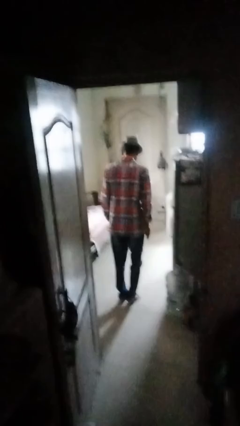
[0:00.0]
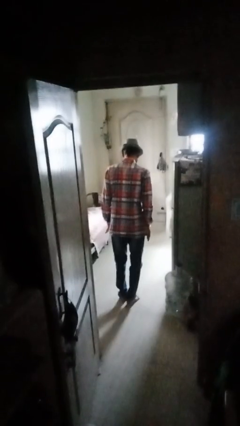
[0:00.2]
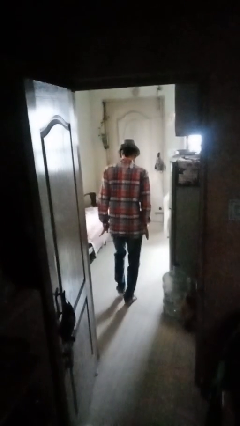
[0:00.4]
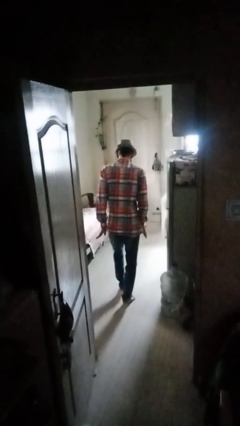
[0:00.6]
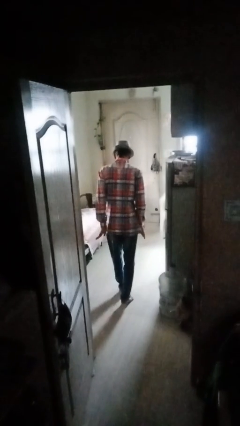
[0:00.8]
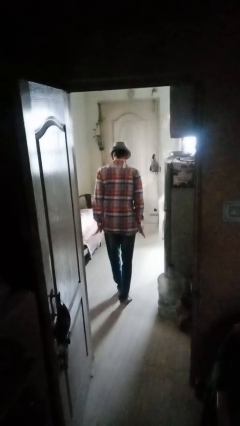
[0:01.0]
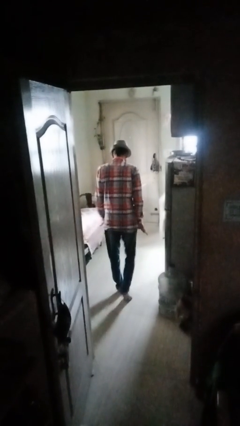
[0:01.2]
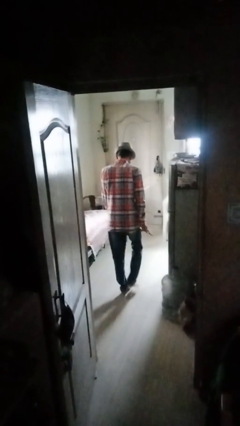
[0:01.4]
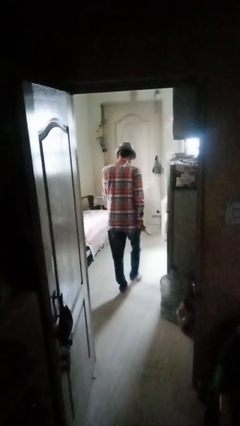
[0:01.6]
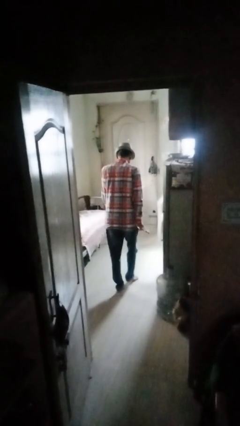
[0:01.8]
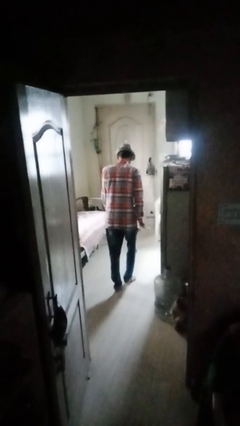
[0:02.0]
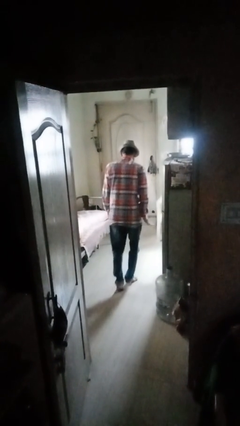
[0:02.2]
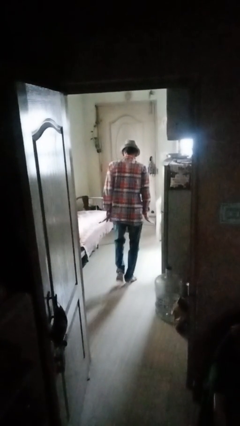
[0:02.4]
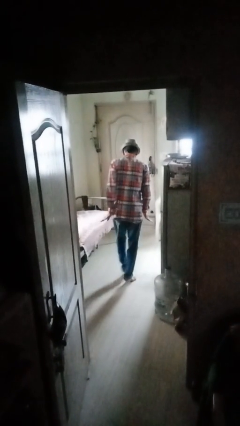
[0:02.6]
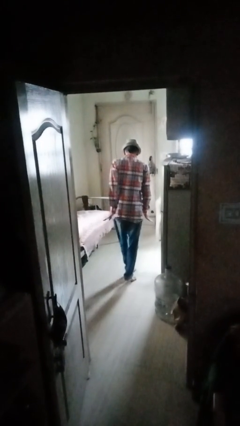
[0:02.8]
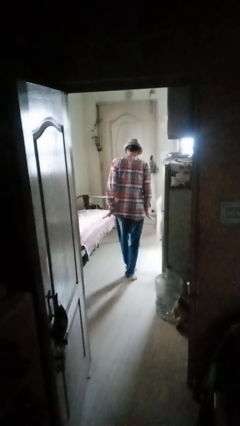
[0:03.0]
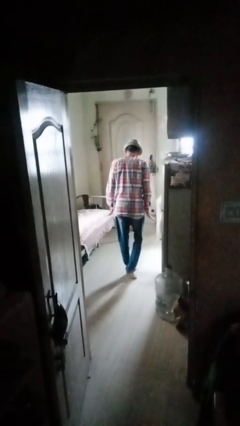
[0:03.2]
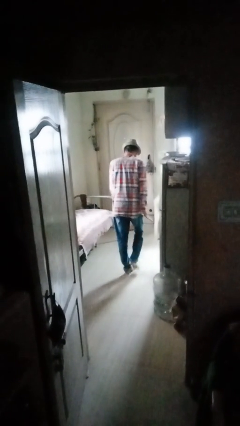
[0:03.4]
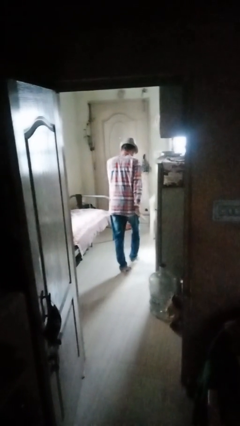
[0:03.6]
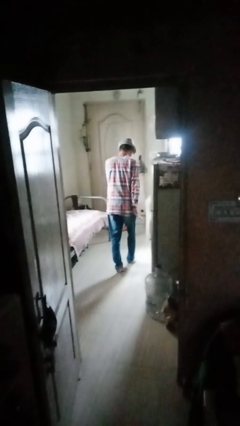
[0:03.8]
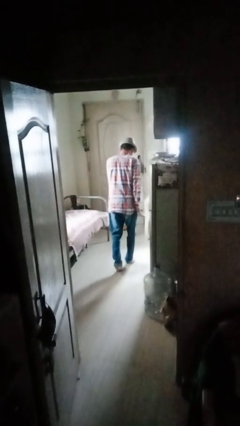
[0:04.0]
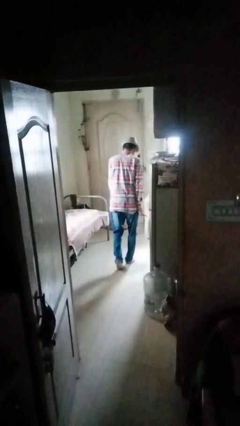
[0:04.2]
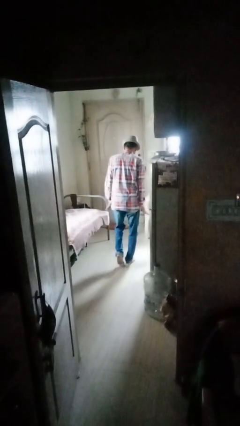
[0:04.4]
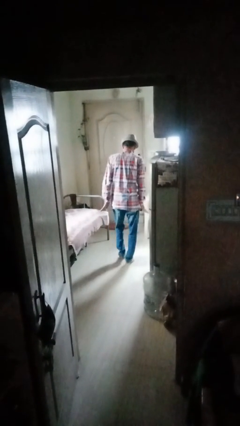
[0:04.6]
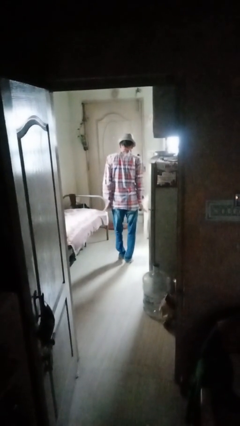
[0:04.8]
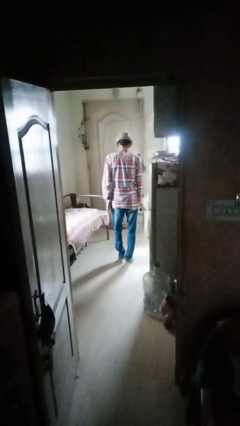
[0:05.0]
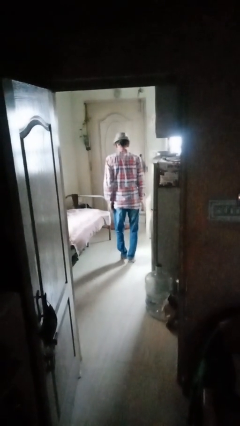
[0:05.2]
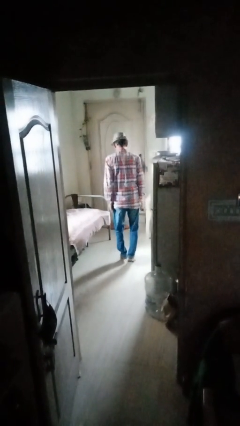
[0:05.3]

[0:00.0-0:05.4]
person walks tiptoe

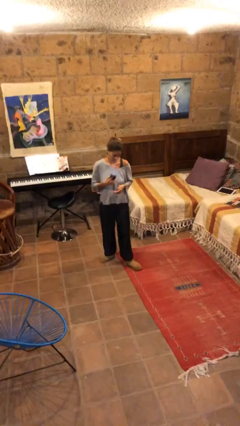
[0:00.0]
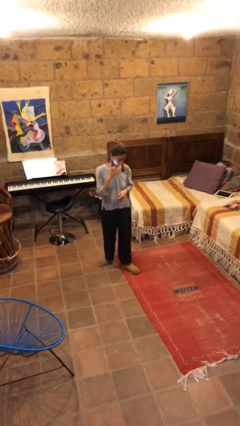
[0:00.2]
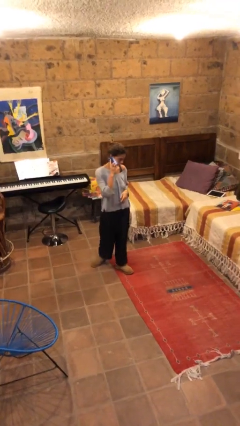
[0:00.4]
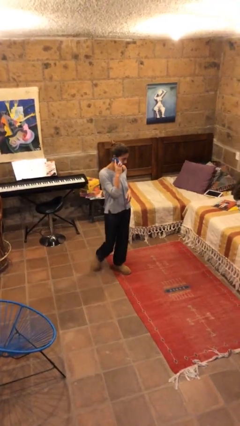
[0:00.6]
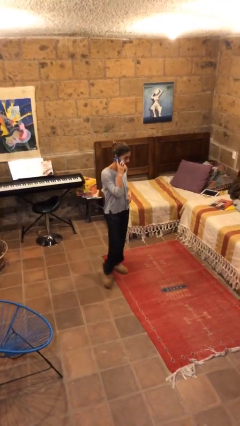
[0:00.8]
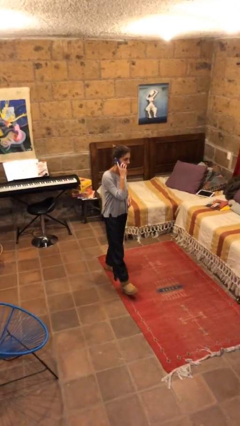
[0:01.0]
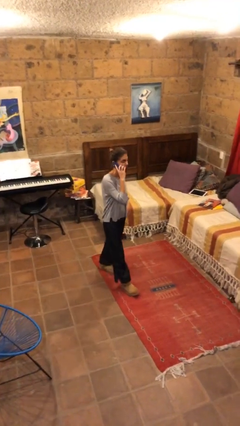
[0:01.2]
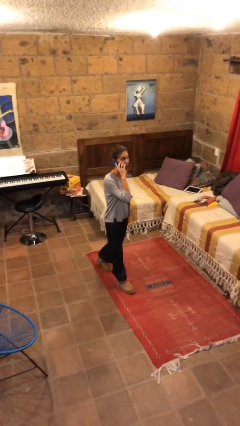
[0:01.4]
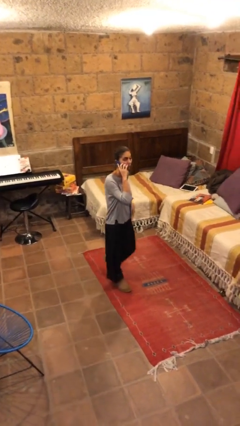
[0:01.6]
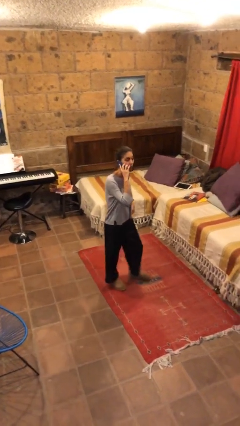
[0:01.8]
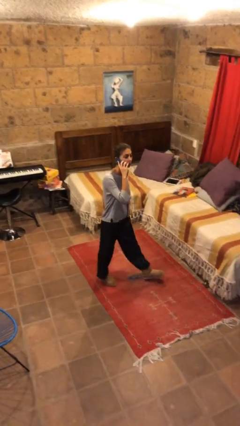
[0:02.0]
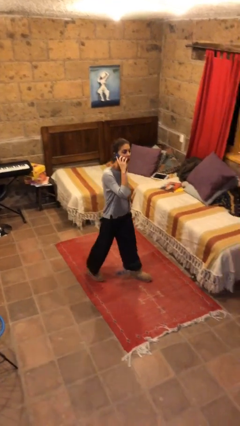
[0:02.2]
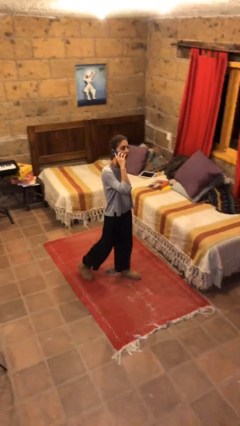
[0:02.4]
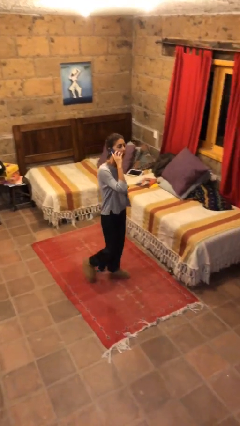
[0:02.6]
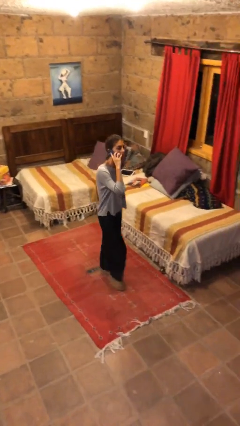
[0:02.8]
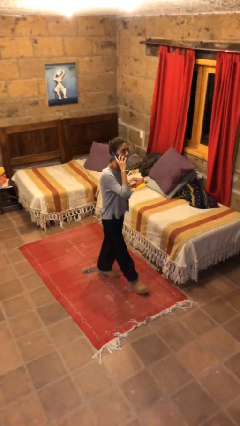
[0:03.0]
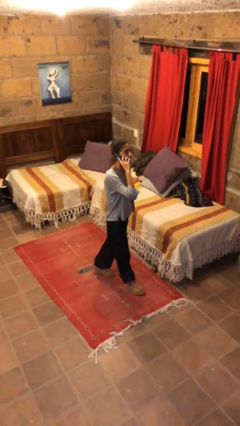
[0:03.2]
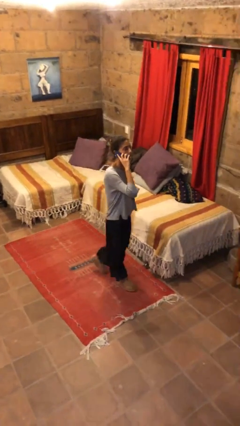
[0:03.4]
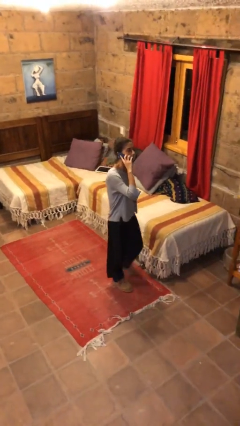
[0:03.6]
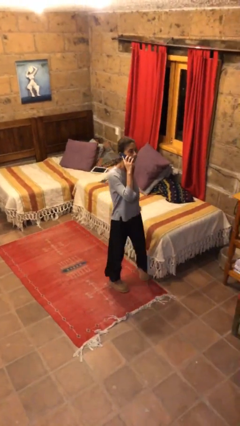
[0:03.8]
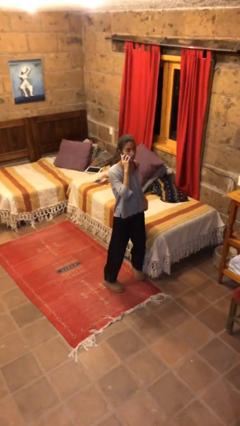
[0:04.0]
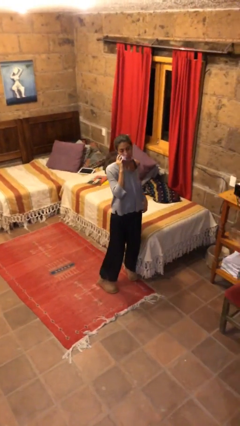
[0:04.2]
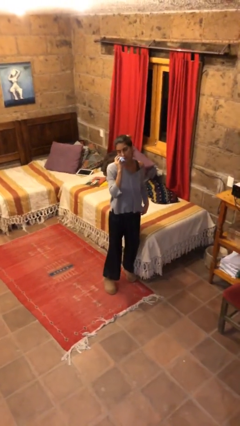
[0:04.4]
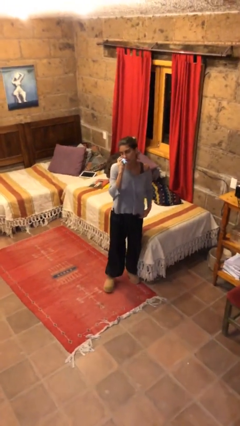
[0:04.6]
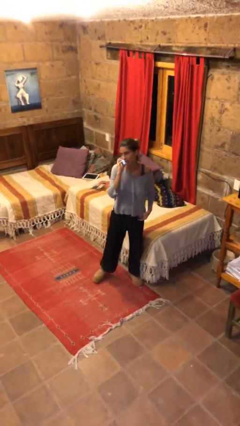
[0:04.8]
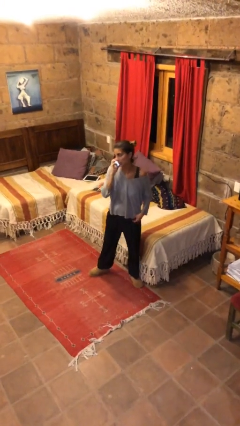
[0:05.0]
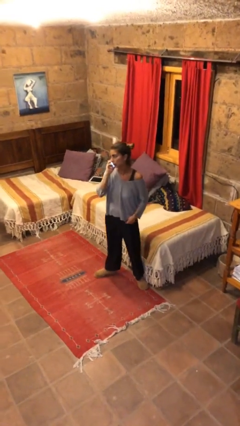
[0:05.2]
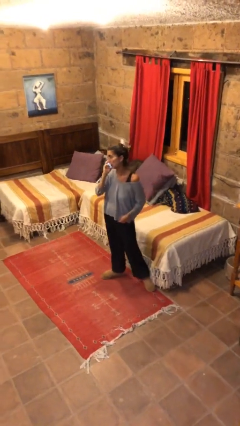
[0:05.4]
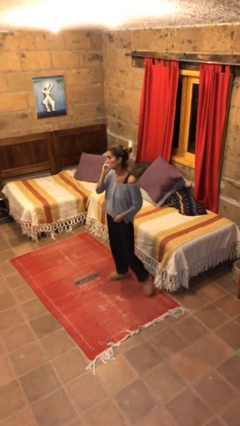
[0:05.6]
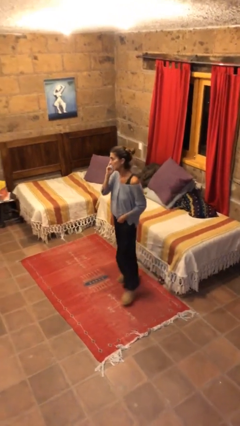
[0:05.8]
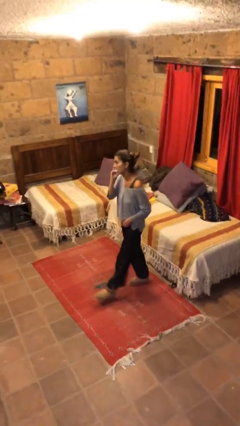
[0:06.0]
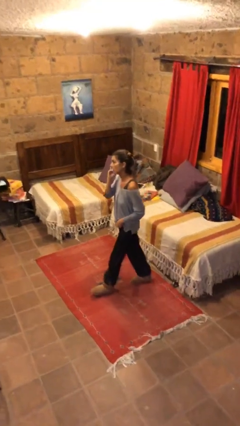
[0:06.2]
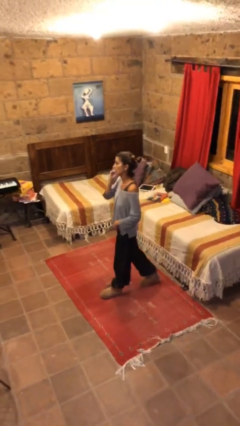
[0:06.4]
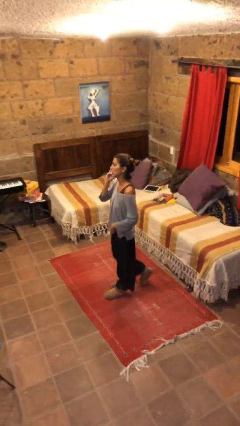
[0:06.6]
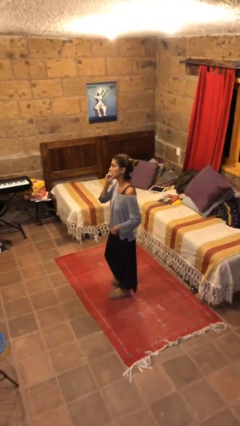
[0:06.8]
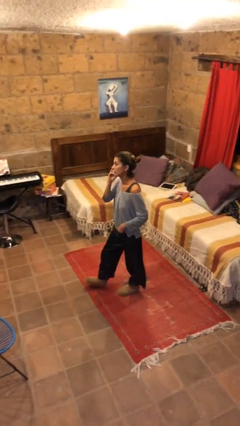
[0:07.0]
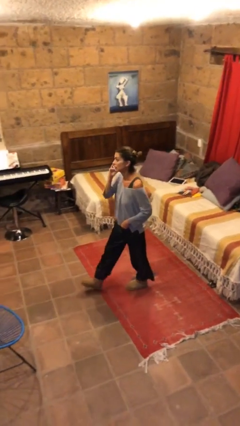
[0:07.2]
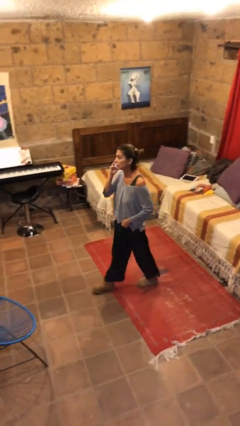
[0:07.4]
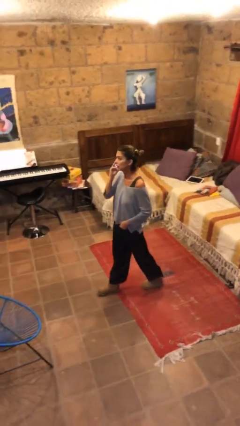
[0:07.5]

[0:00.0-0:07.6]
person talks on phone

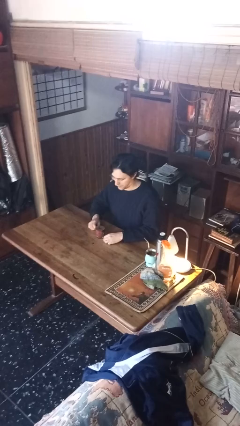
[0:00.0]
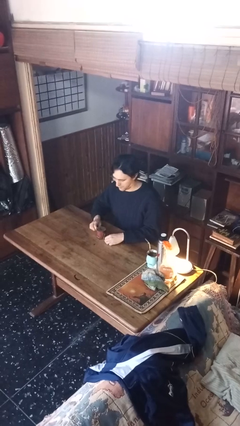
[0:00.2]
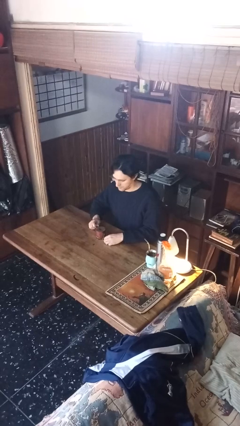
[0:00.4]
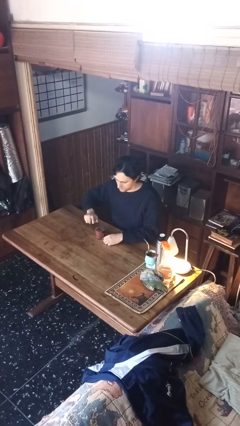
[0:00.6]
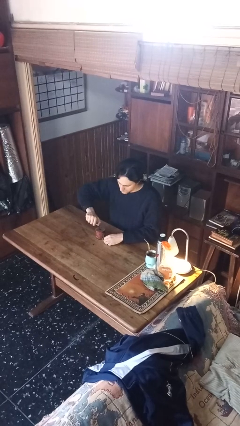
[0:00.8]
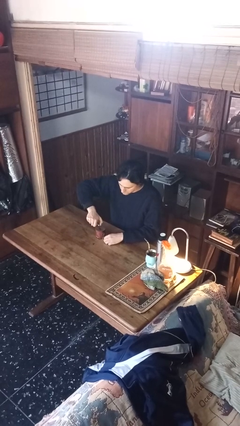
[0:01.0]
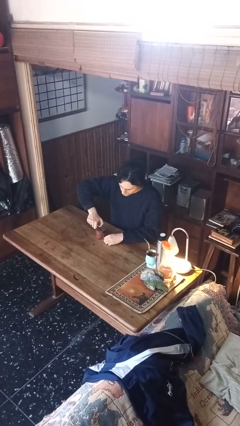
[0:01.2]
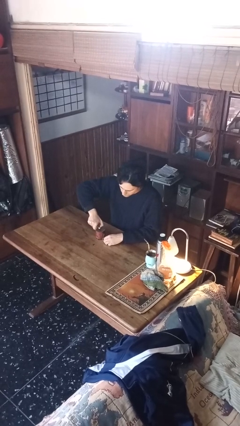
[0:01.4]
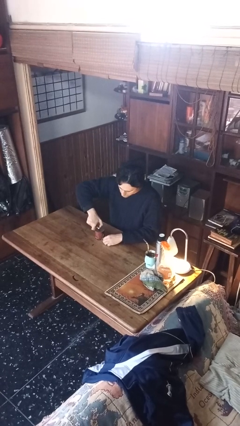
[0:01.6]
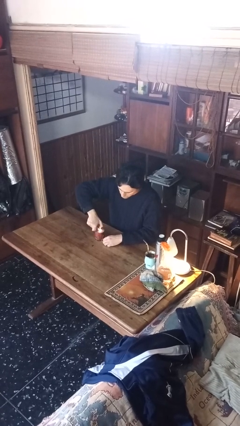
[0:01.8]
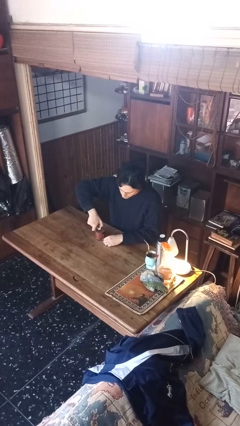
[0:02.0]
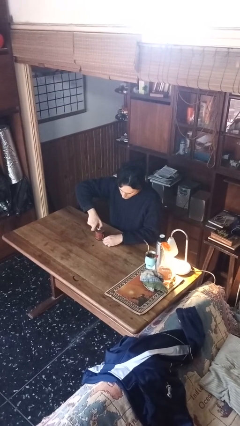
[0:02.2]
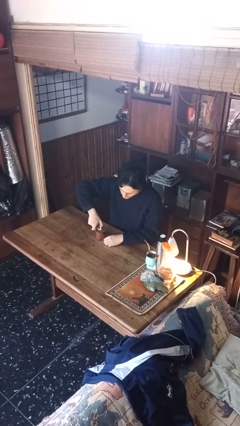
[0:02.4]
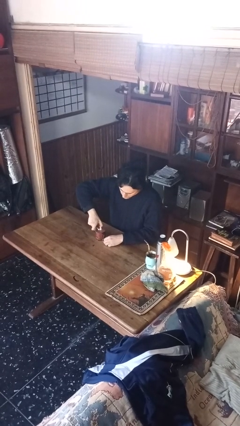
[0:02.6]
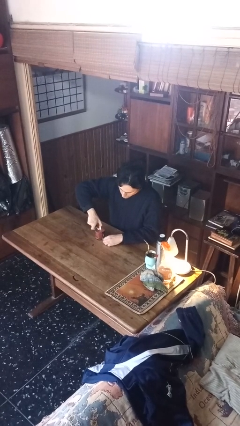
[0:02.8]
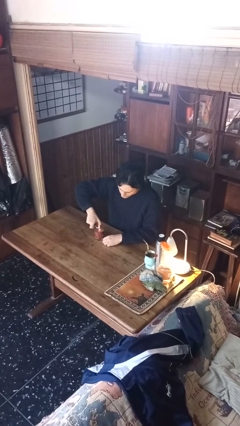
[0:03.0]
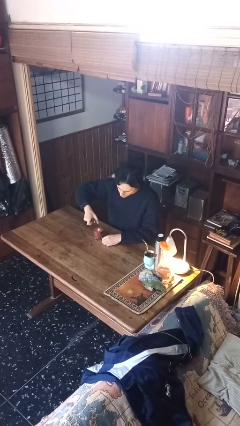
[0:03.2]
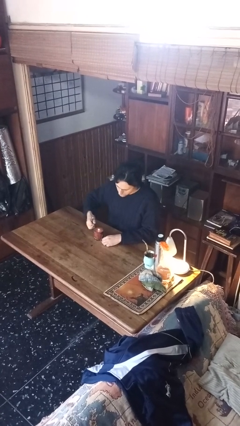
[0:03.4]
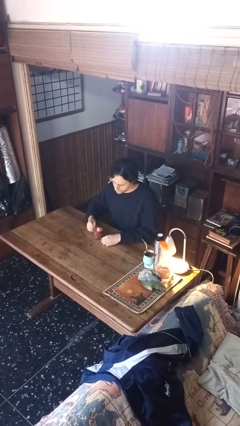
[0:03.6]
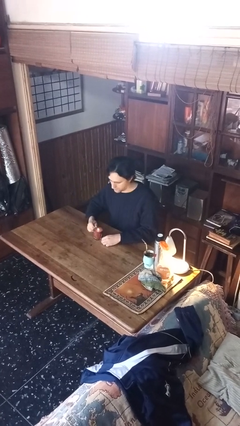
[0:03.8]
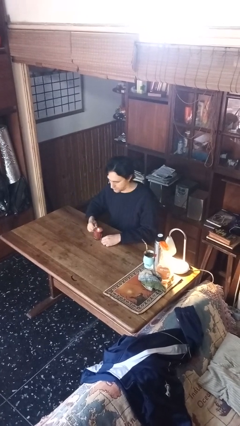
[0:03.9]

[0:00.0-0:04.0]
person lights candle

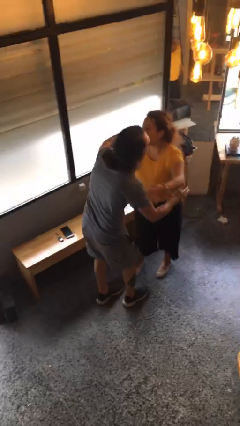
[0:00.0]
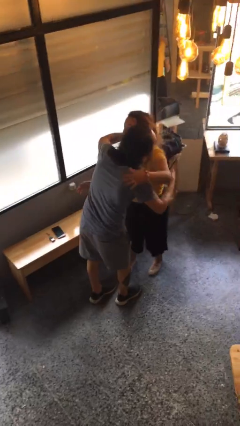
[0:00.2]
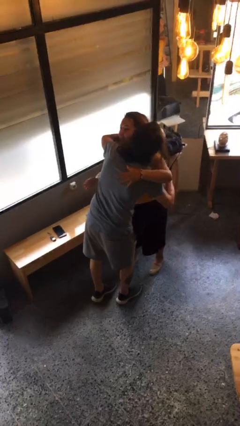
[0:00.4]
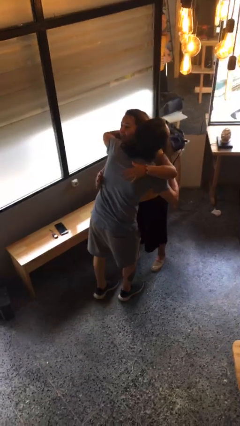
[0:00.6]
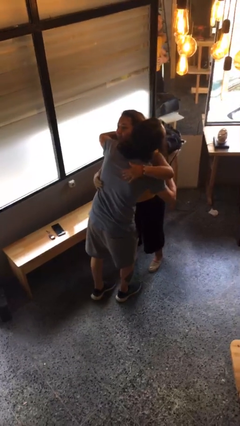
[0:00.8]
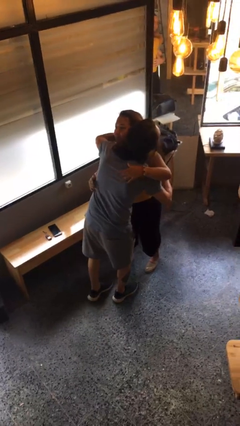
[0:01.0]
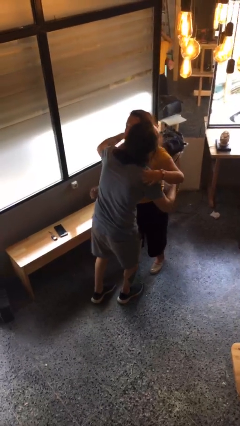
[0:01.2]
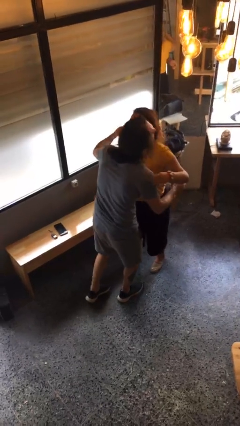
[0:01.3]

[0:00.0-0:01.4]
person embraces person
